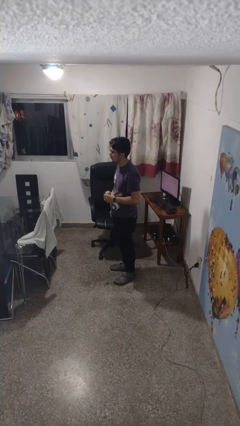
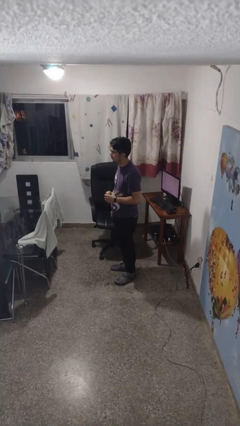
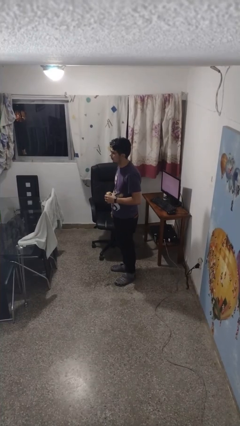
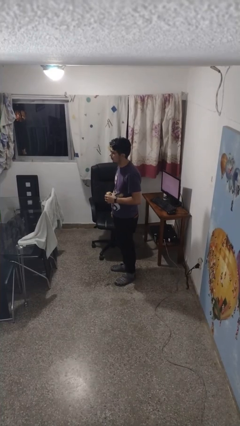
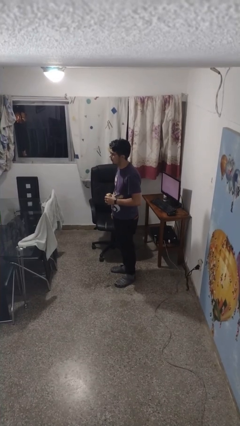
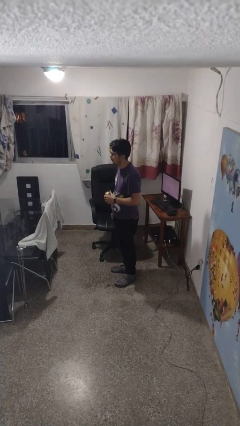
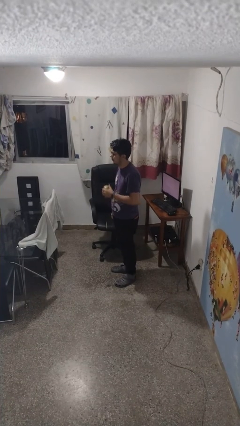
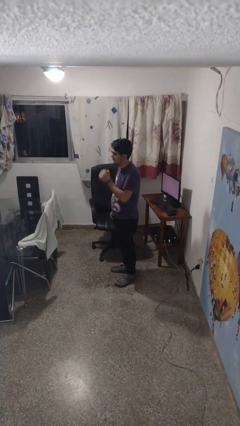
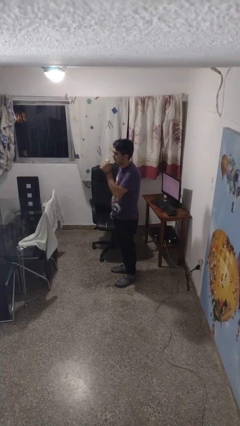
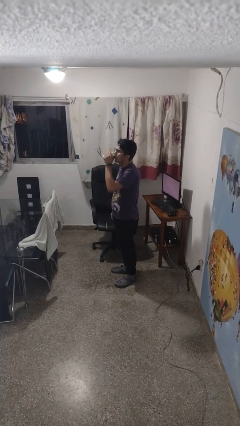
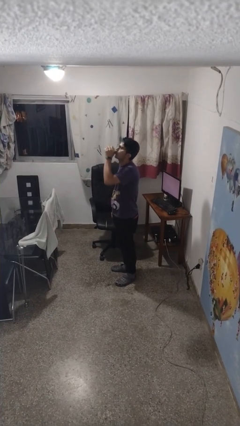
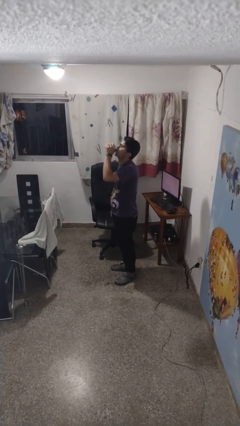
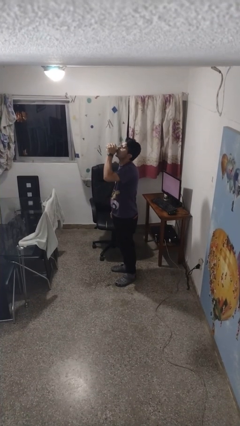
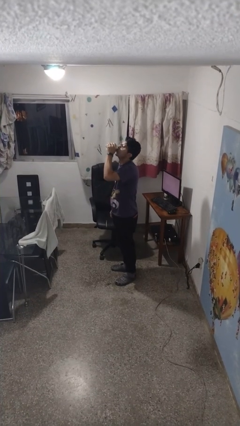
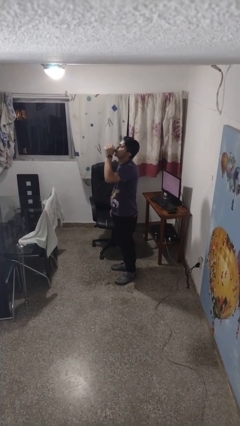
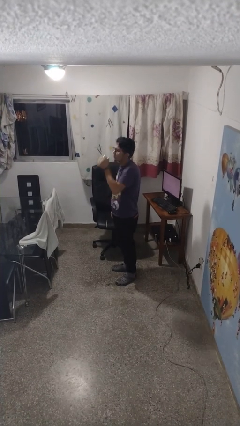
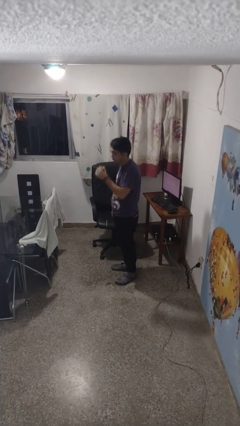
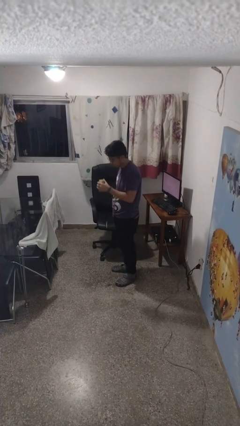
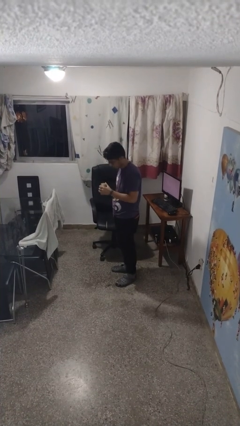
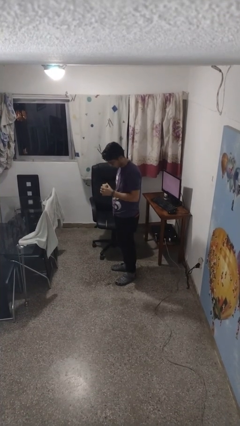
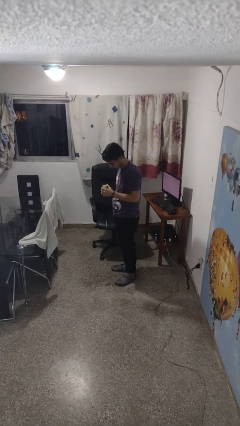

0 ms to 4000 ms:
person drinks from beverage can

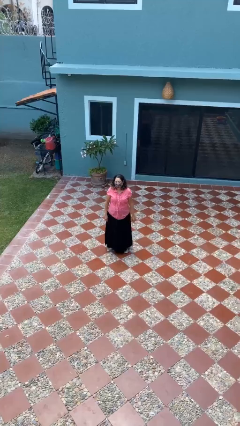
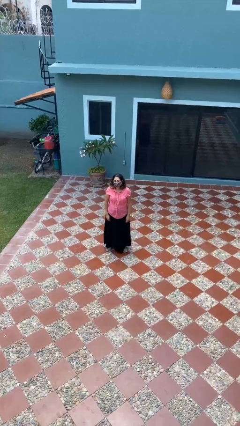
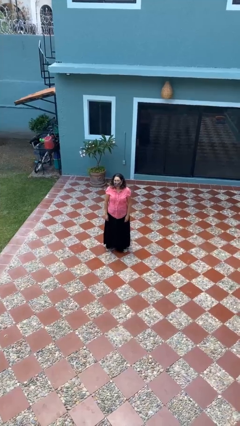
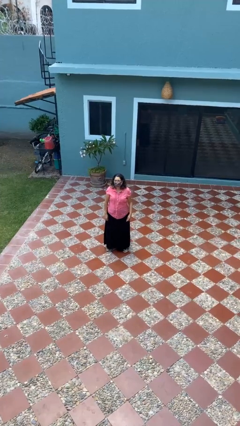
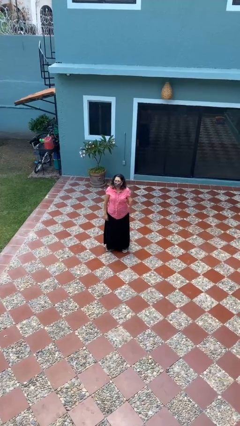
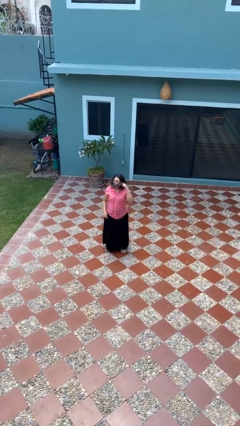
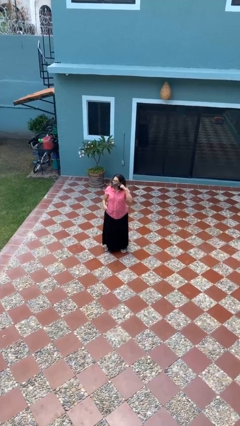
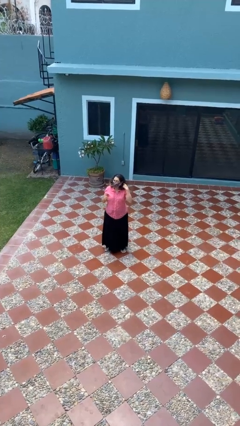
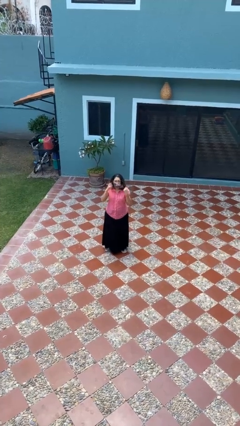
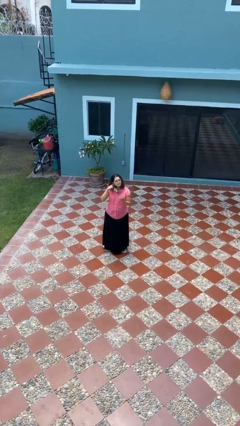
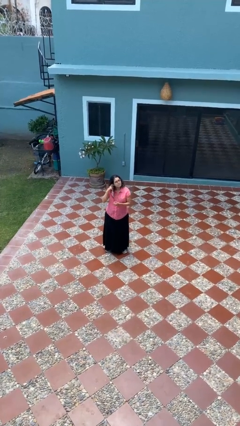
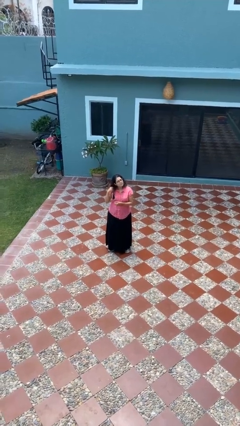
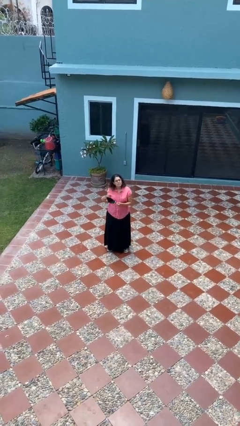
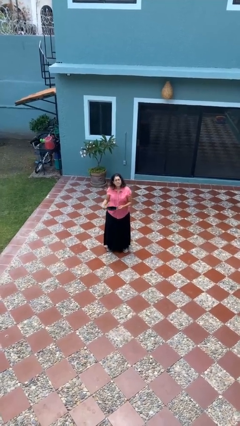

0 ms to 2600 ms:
person takes off facemask

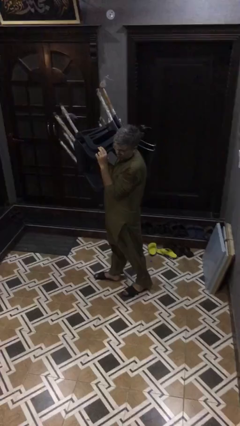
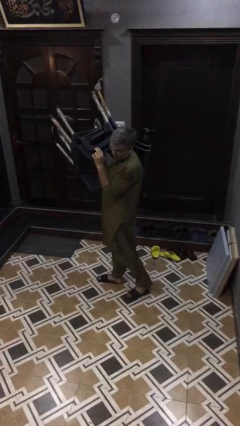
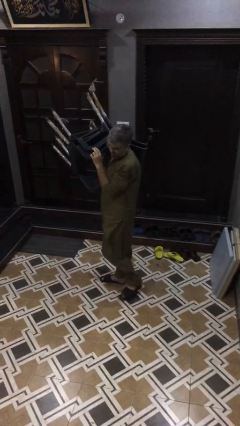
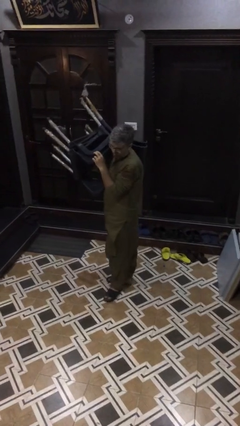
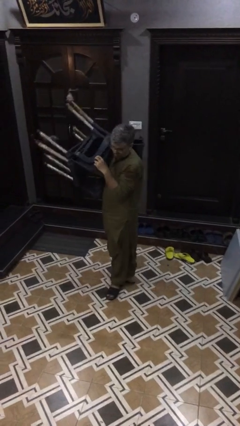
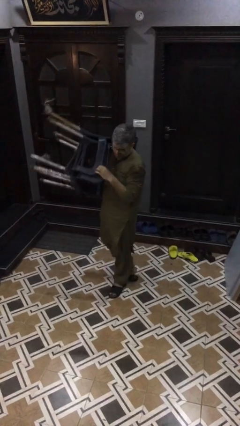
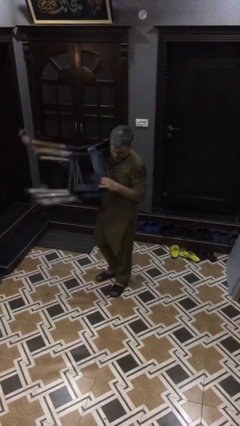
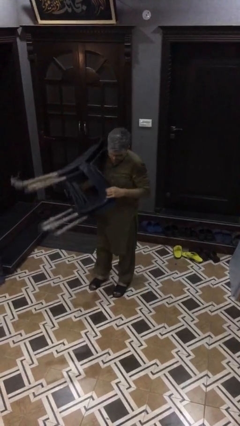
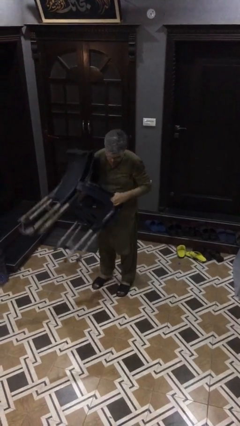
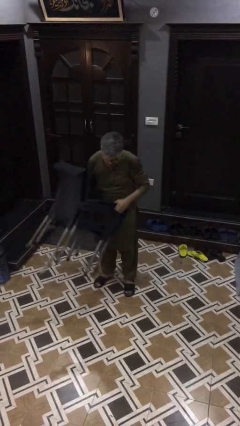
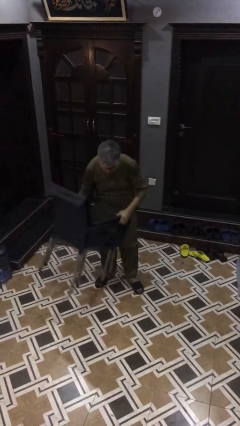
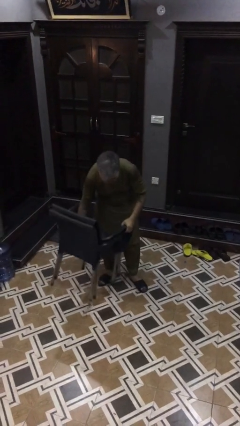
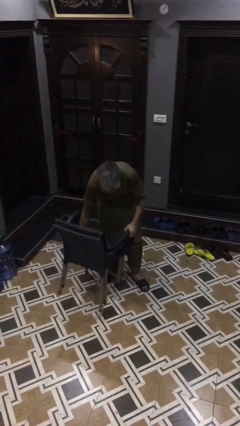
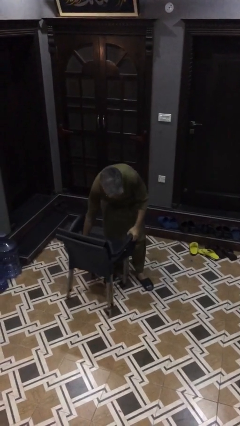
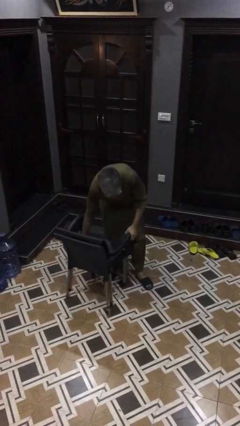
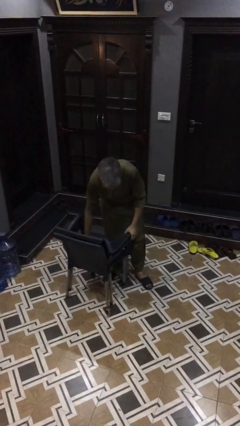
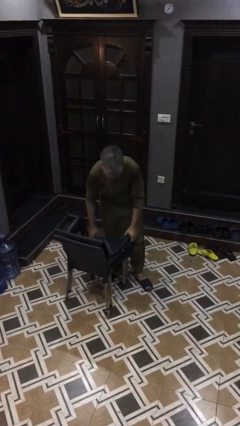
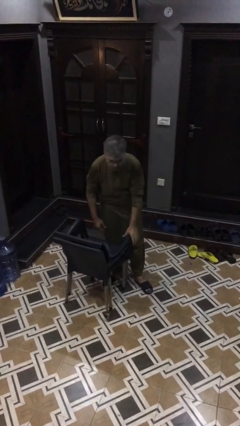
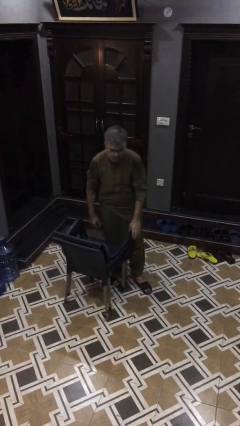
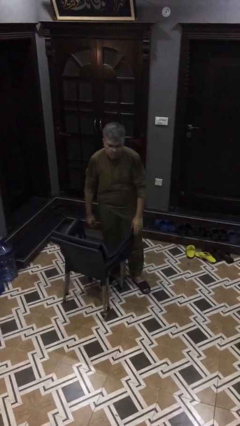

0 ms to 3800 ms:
person puts down object on floor

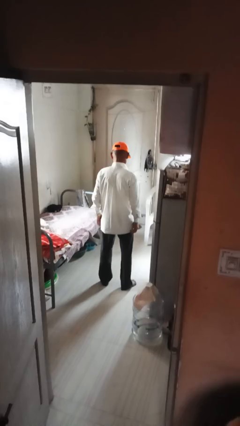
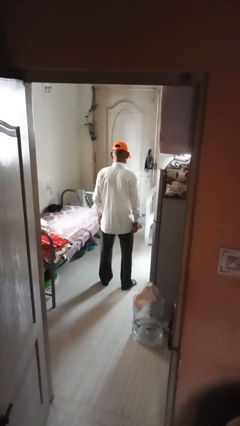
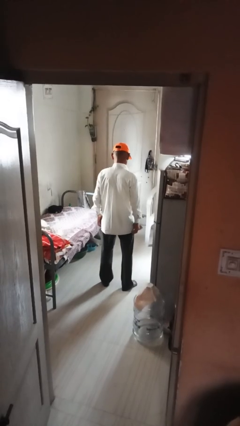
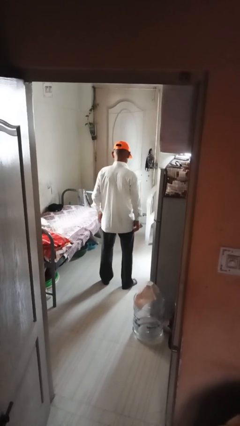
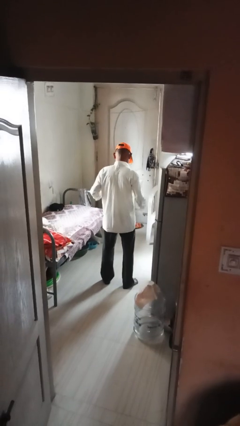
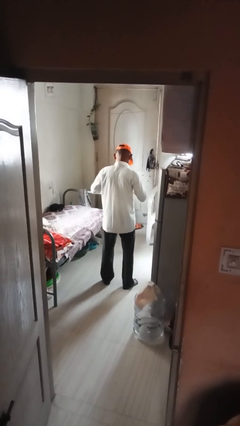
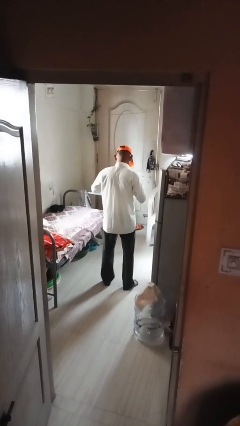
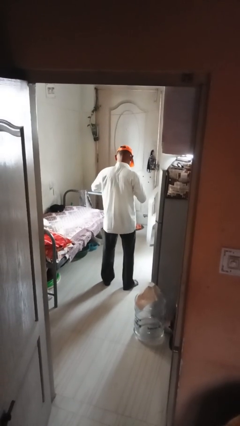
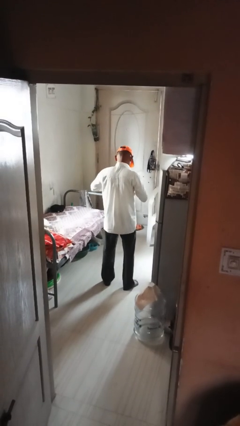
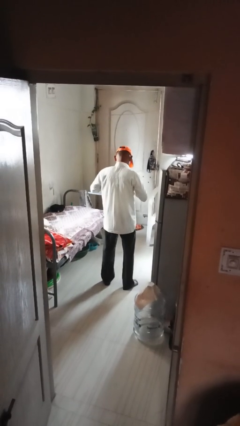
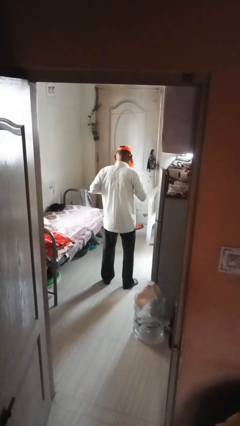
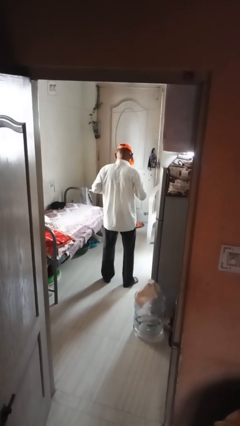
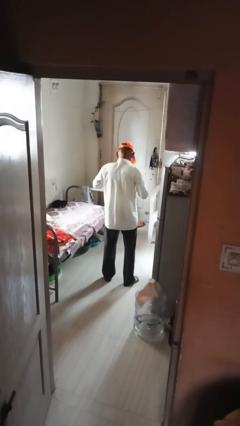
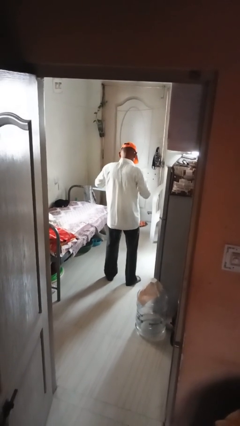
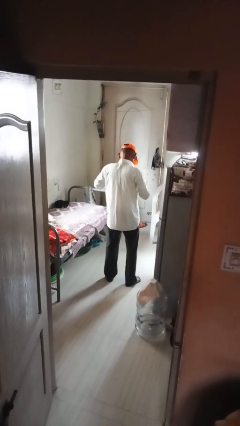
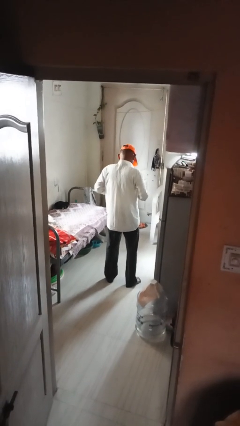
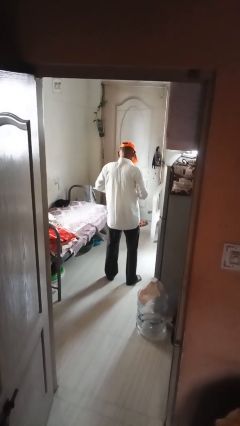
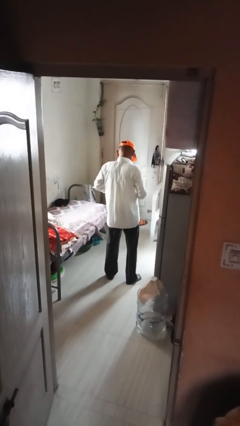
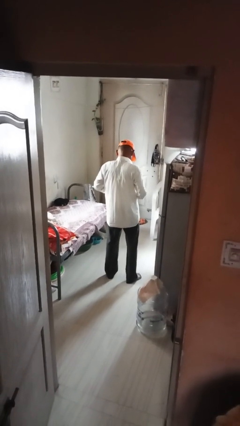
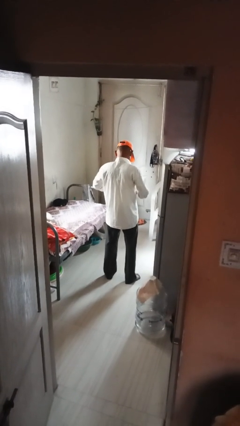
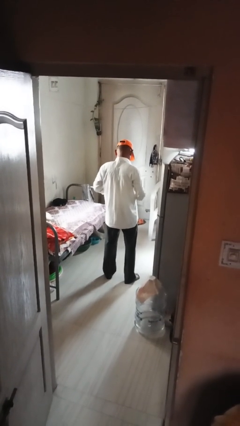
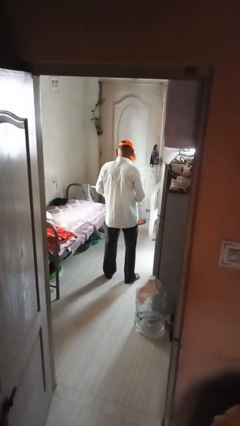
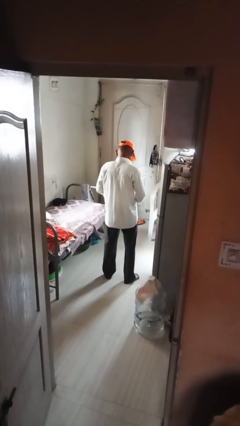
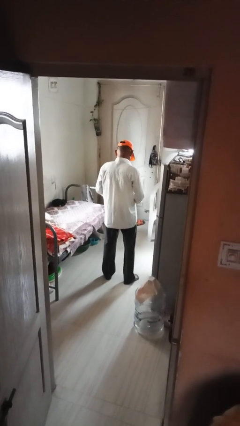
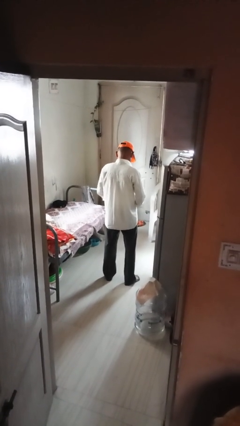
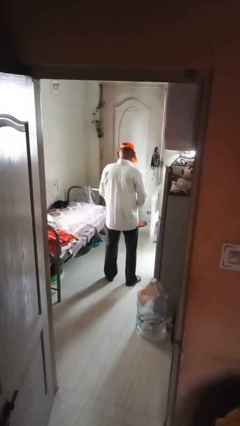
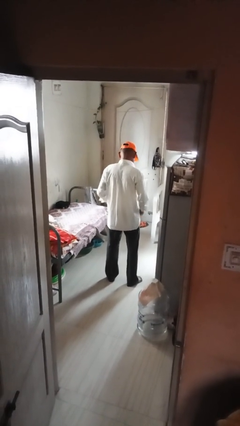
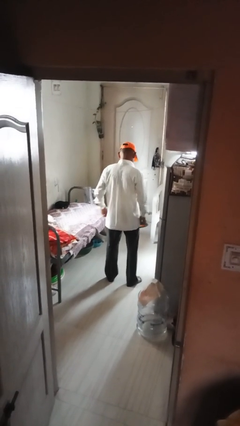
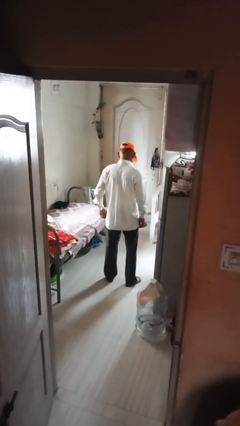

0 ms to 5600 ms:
person unbuttons shirt

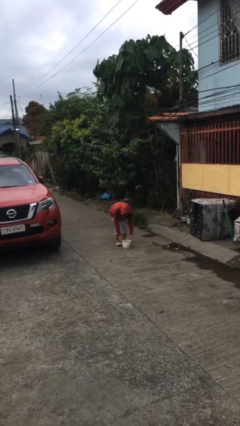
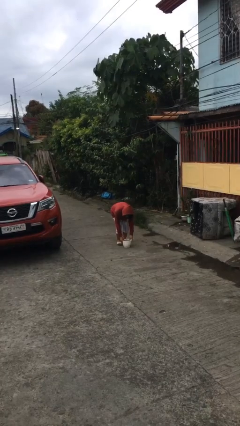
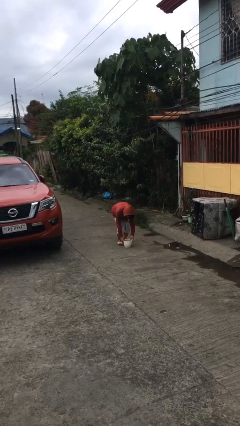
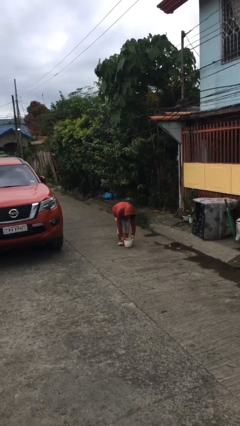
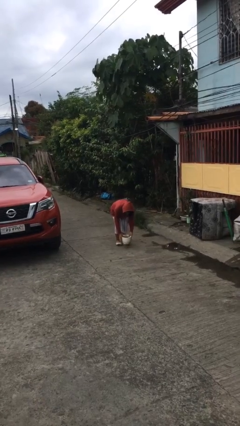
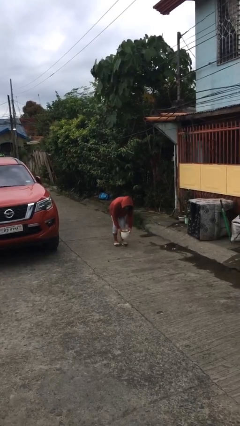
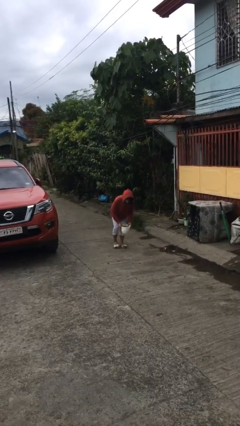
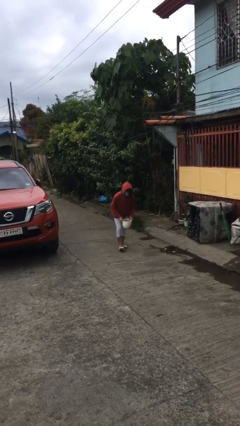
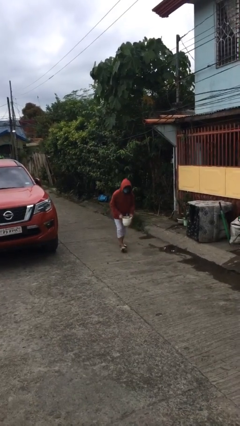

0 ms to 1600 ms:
person picks up object from floor
